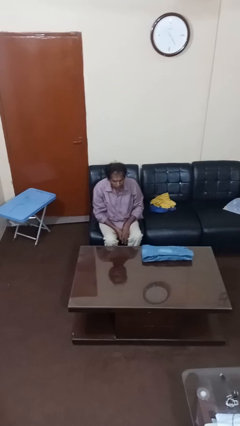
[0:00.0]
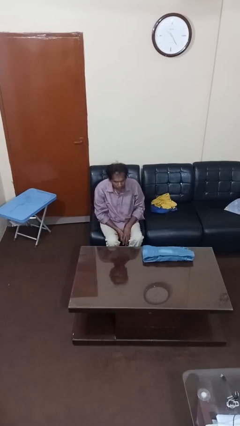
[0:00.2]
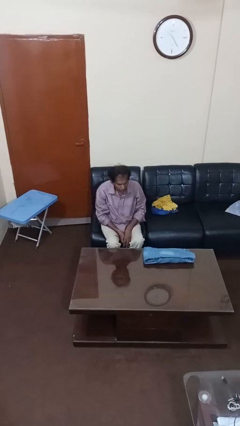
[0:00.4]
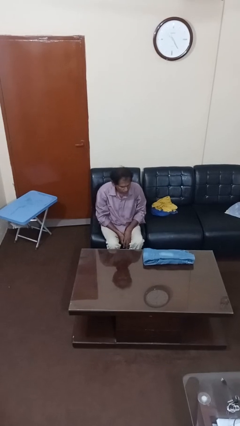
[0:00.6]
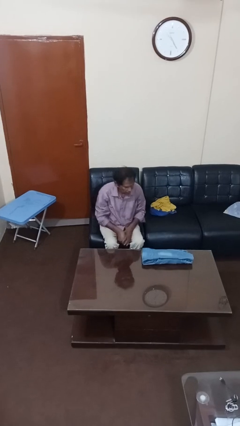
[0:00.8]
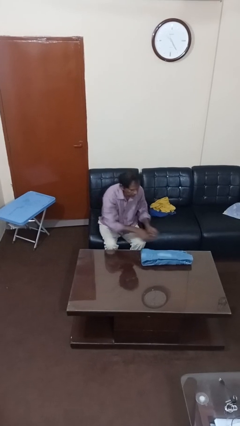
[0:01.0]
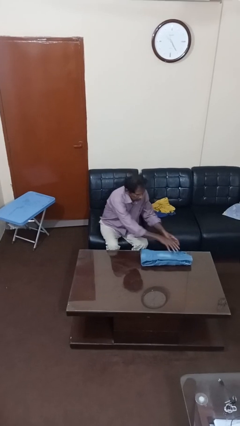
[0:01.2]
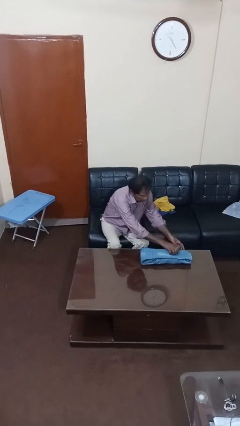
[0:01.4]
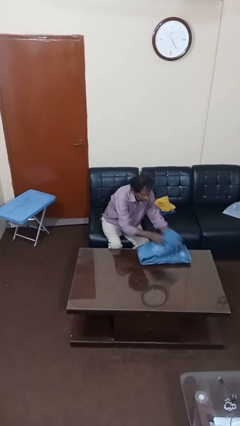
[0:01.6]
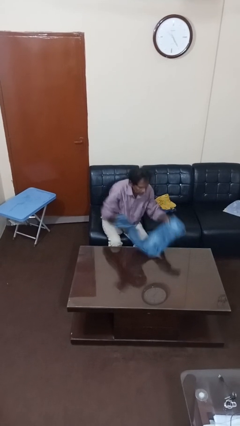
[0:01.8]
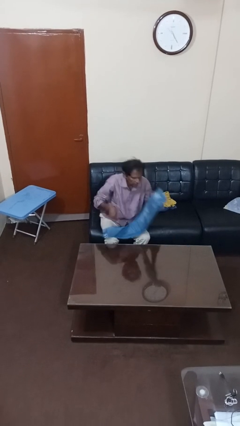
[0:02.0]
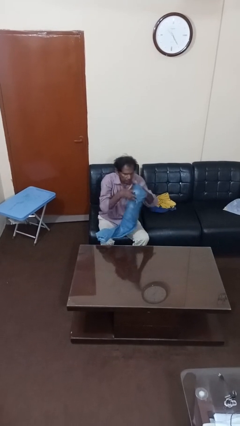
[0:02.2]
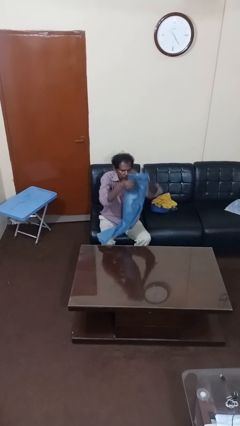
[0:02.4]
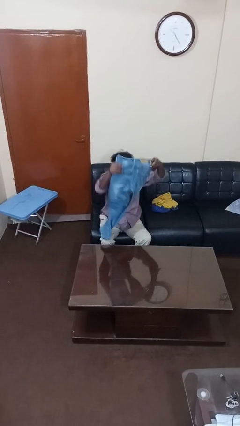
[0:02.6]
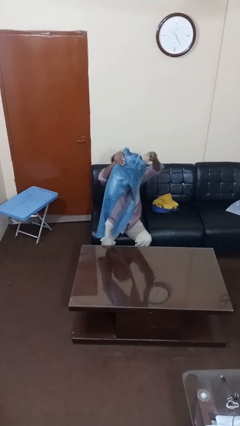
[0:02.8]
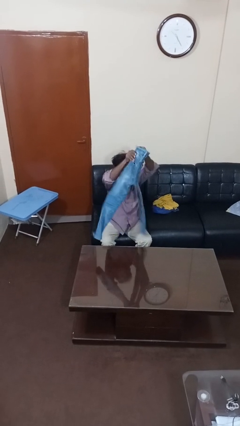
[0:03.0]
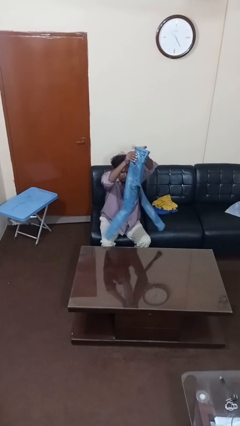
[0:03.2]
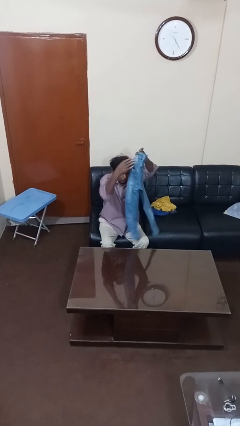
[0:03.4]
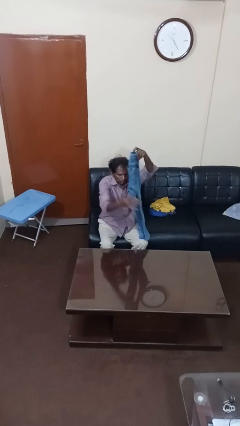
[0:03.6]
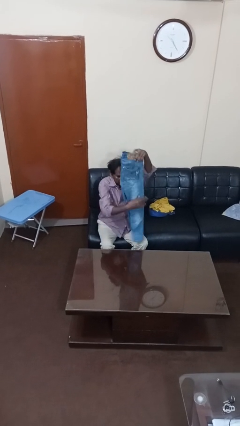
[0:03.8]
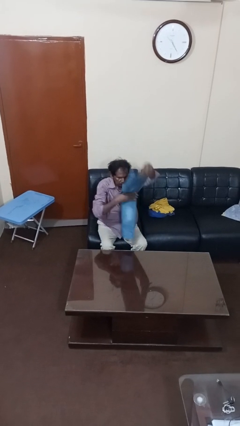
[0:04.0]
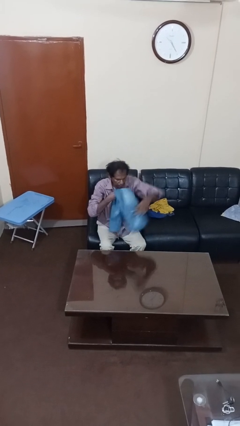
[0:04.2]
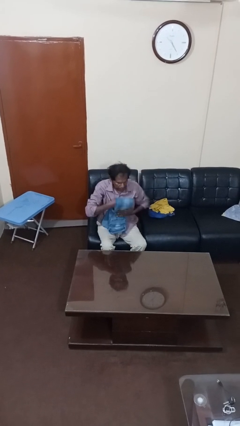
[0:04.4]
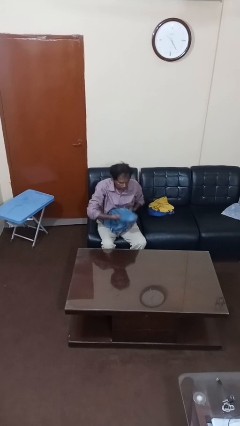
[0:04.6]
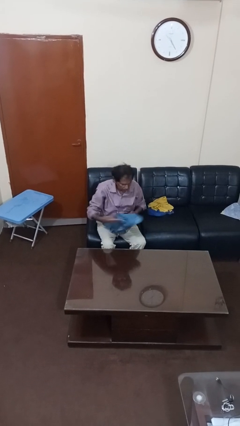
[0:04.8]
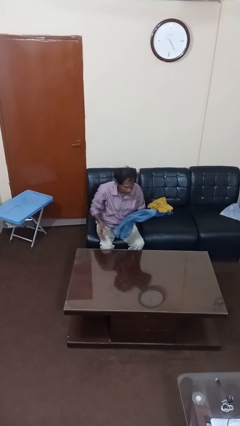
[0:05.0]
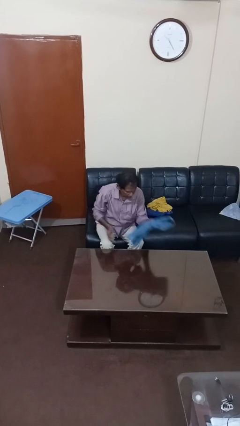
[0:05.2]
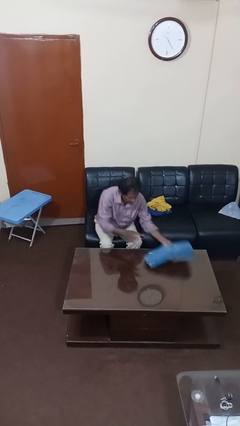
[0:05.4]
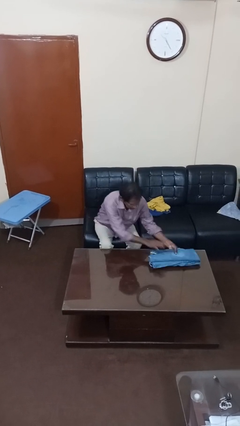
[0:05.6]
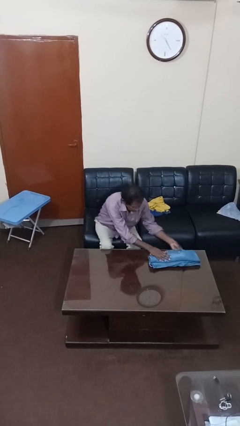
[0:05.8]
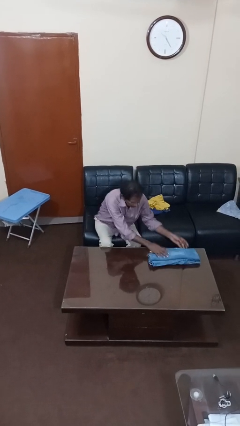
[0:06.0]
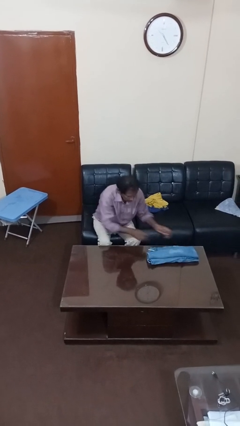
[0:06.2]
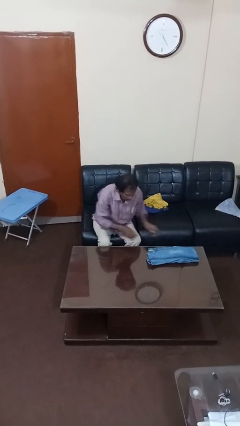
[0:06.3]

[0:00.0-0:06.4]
person folds pants

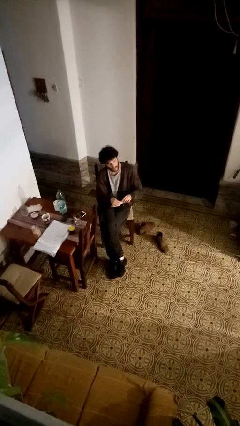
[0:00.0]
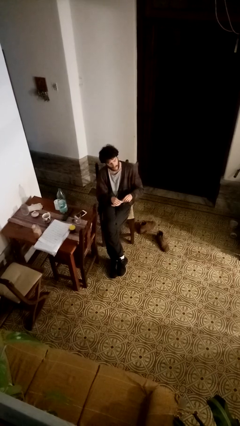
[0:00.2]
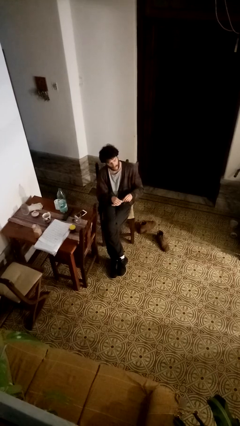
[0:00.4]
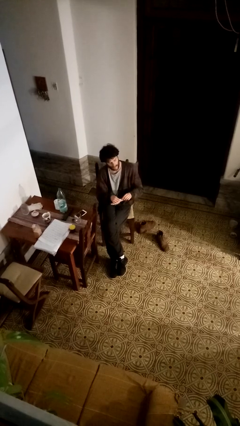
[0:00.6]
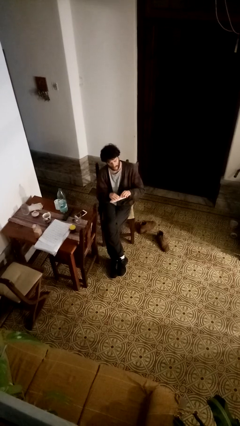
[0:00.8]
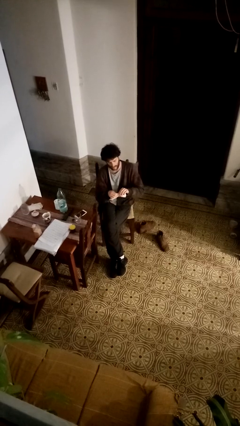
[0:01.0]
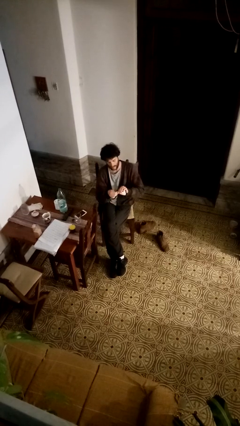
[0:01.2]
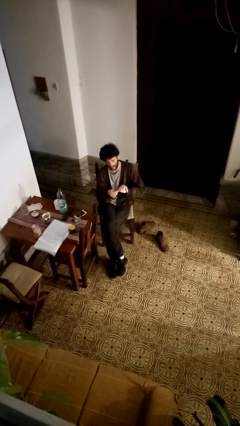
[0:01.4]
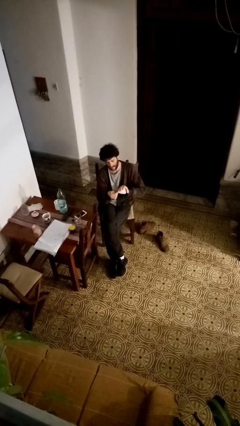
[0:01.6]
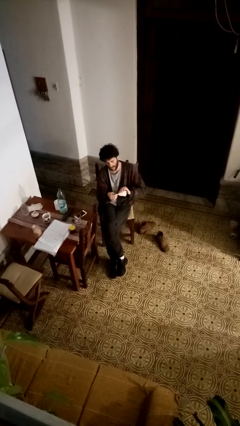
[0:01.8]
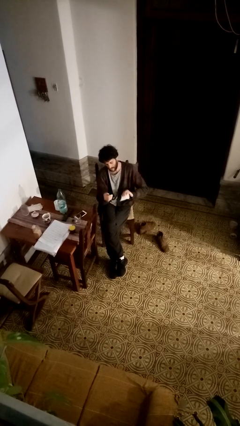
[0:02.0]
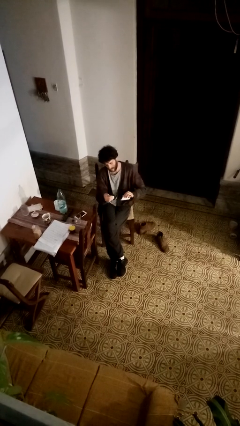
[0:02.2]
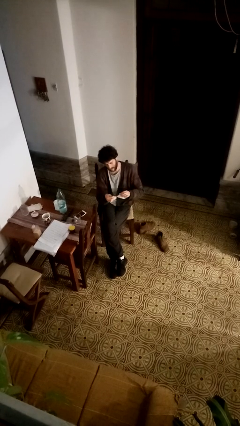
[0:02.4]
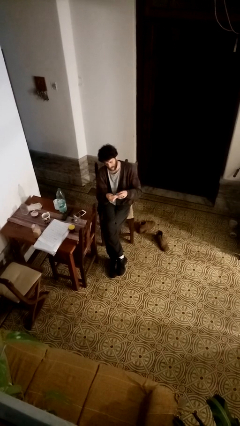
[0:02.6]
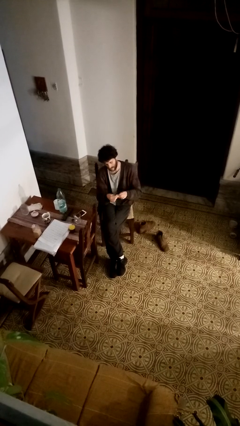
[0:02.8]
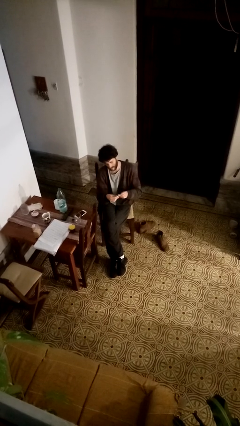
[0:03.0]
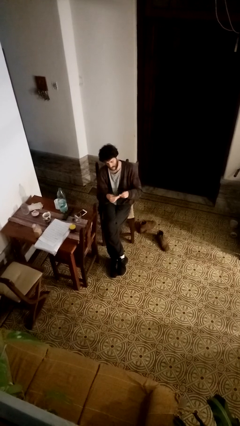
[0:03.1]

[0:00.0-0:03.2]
person tears paper

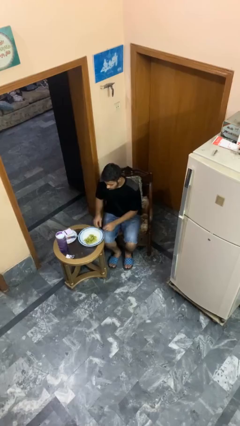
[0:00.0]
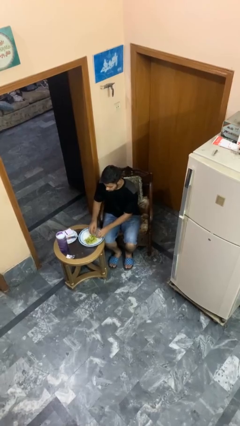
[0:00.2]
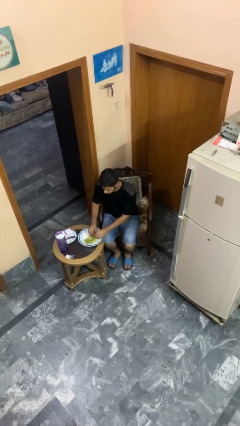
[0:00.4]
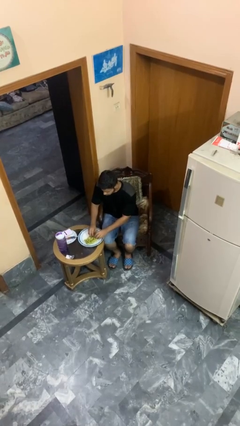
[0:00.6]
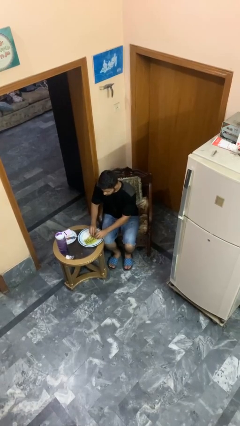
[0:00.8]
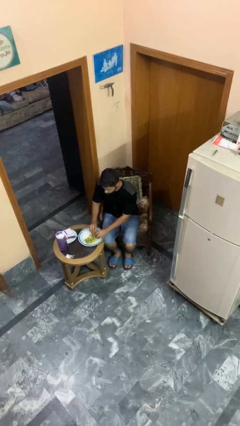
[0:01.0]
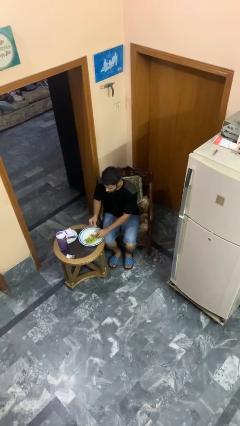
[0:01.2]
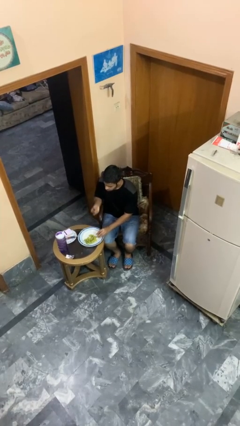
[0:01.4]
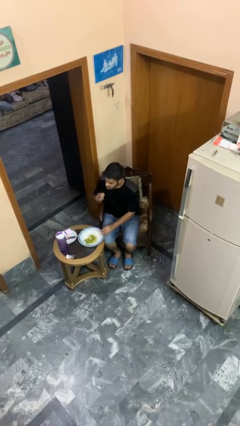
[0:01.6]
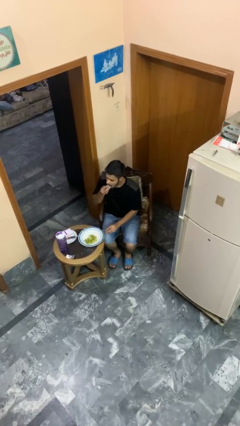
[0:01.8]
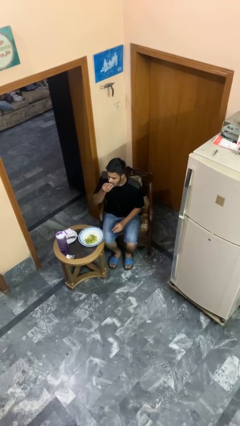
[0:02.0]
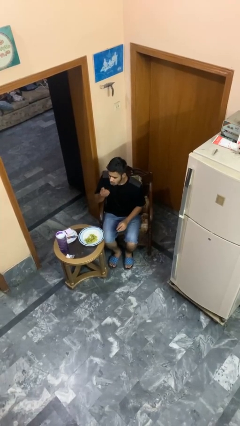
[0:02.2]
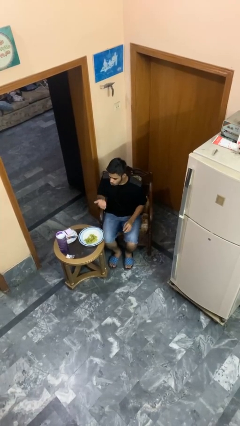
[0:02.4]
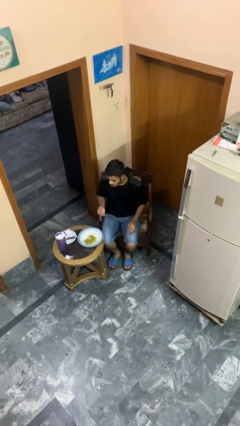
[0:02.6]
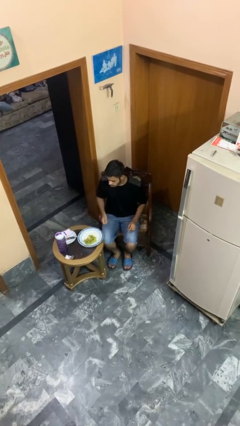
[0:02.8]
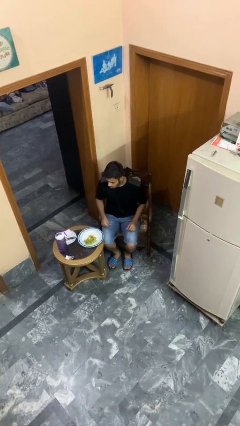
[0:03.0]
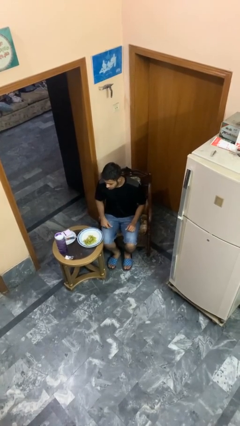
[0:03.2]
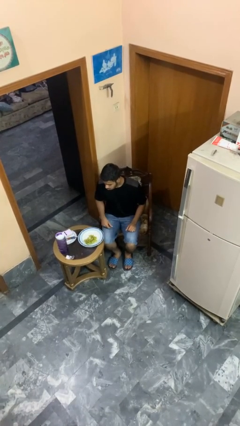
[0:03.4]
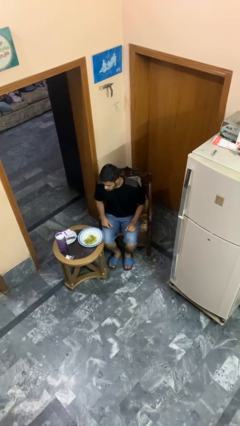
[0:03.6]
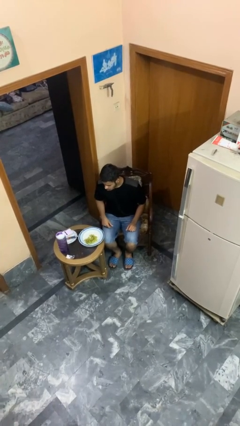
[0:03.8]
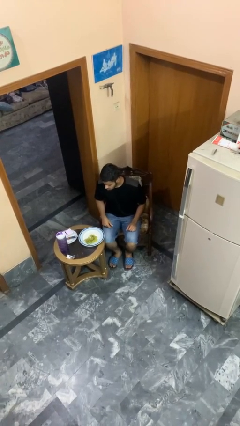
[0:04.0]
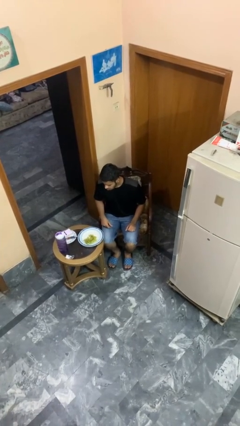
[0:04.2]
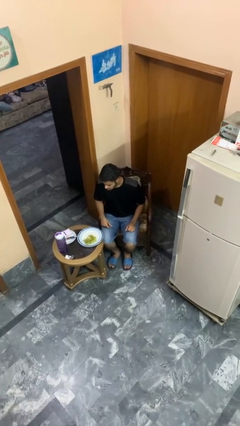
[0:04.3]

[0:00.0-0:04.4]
person eats with hands

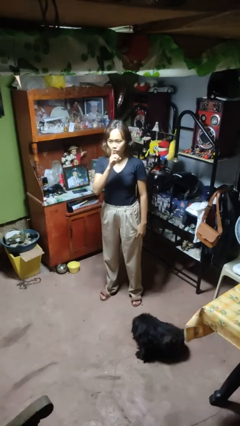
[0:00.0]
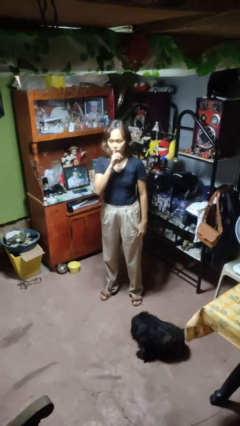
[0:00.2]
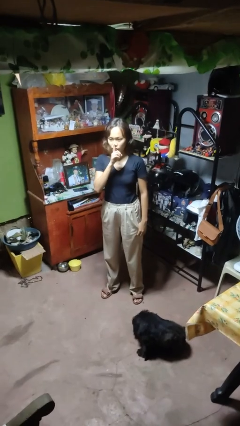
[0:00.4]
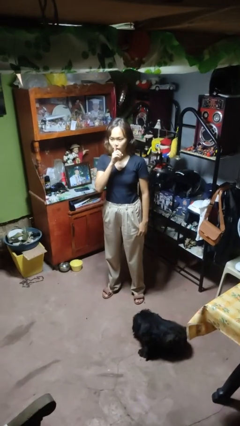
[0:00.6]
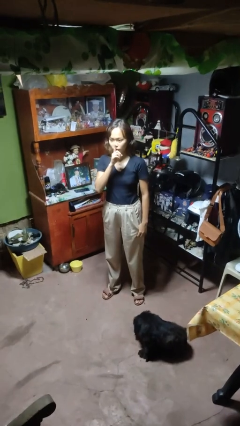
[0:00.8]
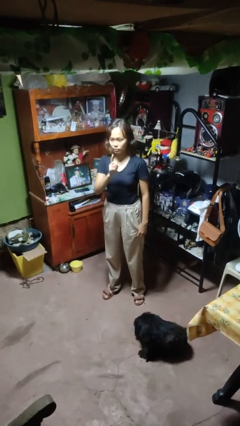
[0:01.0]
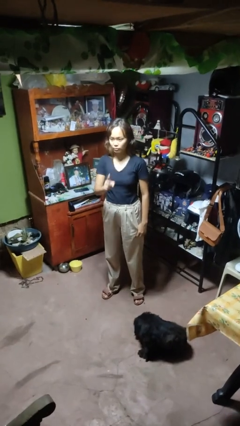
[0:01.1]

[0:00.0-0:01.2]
person gestures be quiet

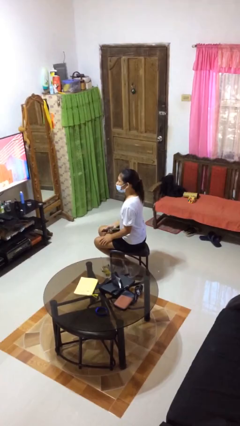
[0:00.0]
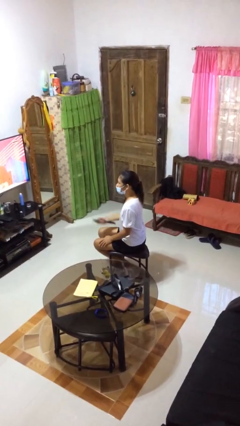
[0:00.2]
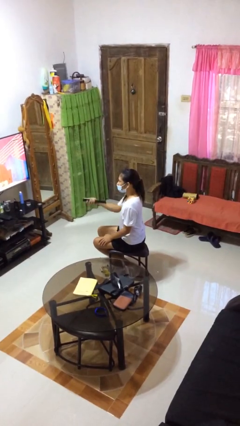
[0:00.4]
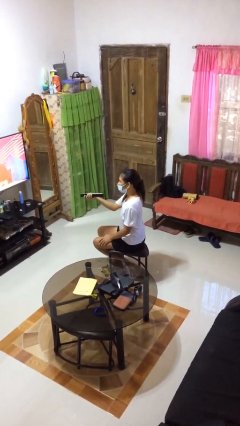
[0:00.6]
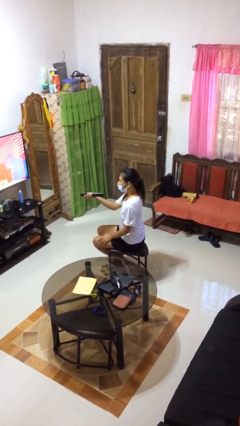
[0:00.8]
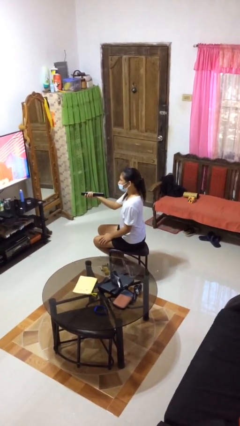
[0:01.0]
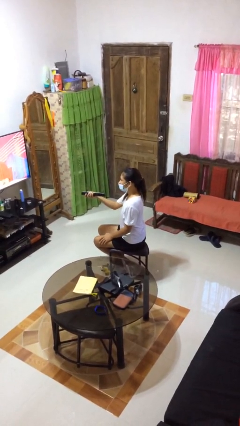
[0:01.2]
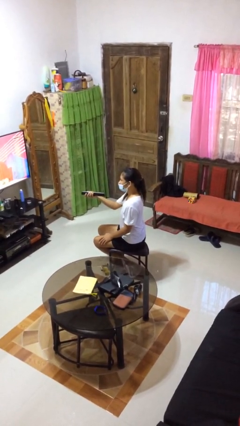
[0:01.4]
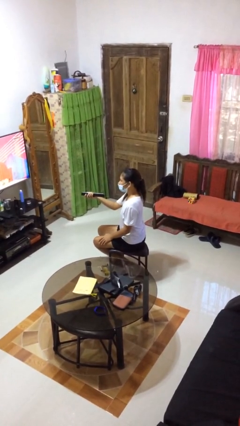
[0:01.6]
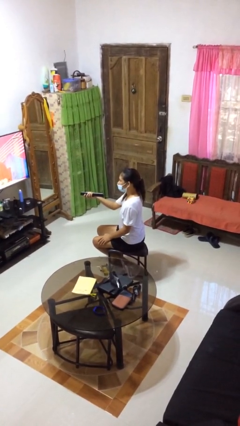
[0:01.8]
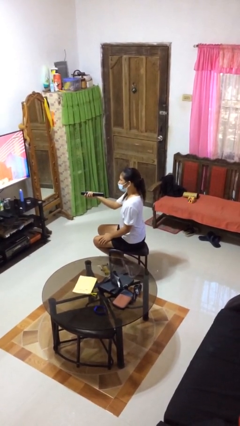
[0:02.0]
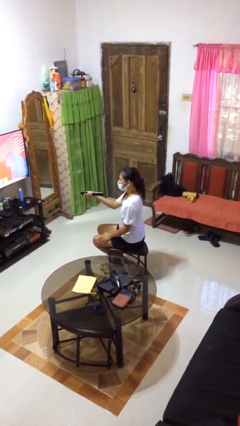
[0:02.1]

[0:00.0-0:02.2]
person uses television remote

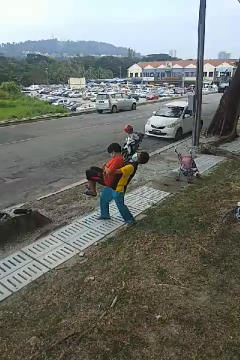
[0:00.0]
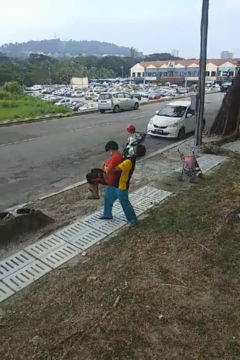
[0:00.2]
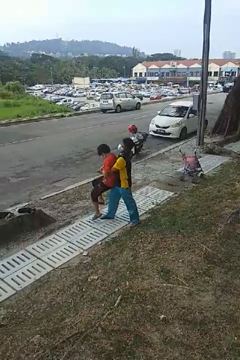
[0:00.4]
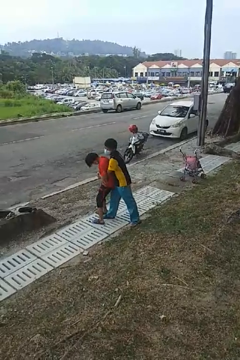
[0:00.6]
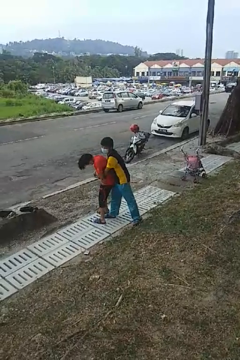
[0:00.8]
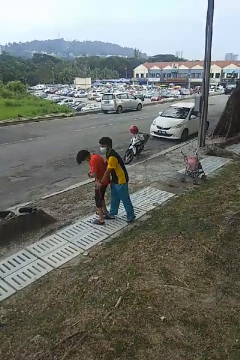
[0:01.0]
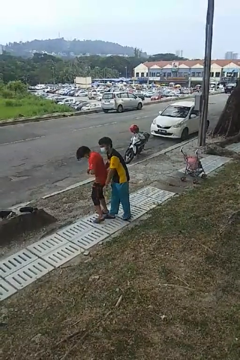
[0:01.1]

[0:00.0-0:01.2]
person puts down person
